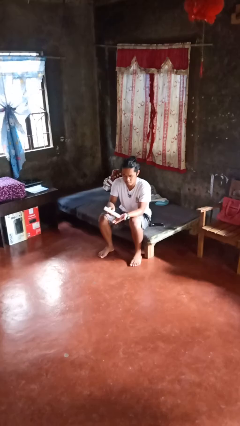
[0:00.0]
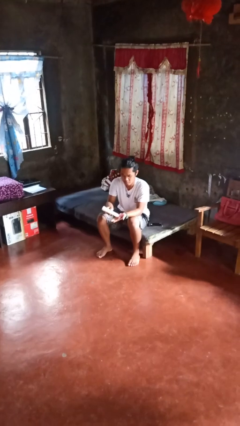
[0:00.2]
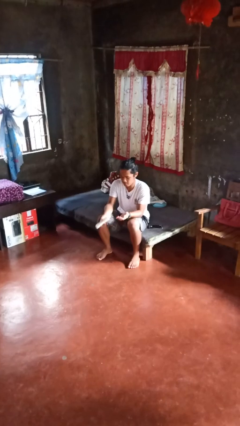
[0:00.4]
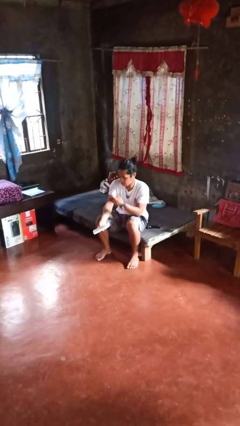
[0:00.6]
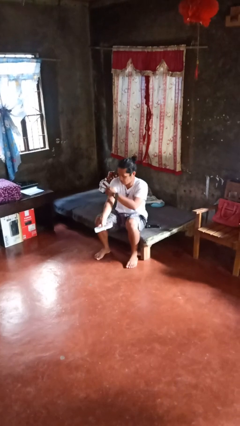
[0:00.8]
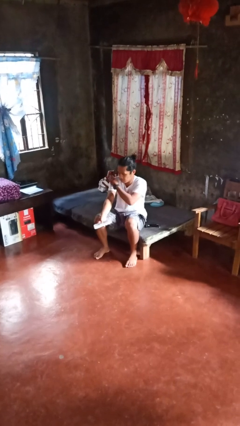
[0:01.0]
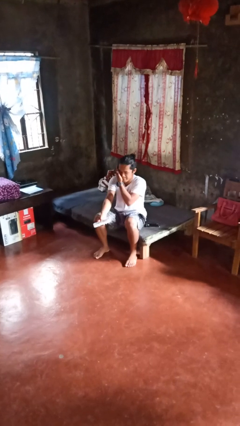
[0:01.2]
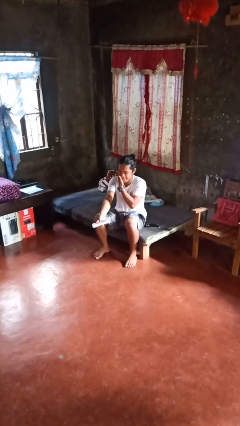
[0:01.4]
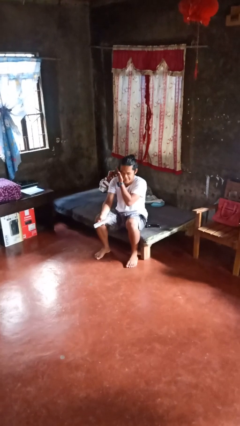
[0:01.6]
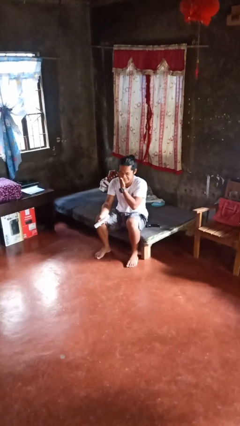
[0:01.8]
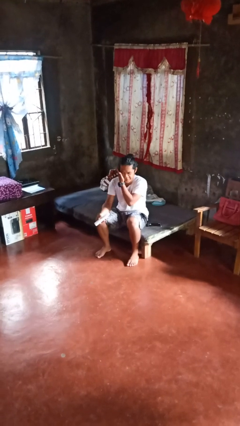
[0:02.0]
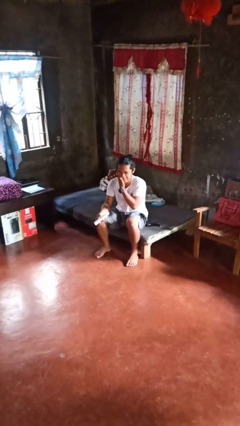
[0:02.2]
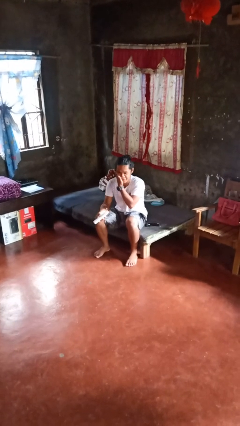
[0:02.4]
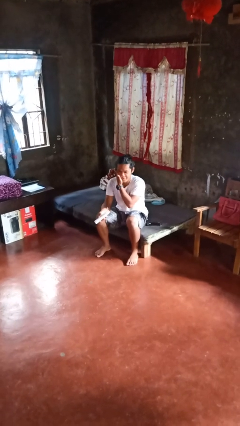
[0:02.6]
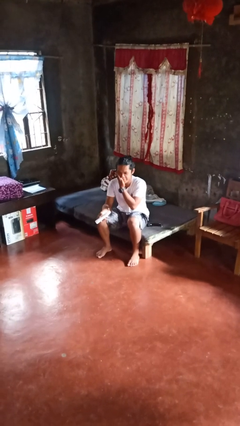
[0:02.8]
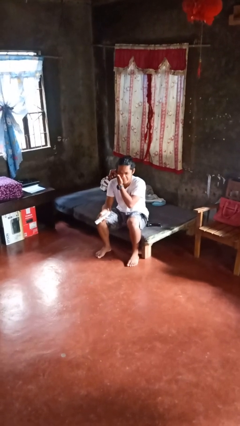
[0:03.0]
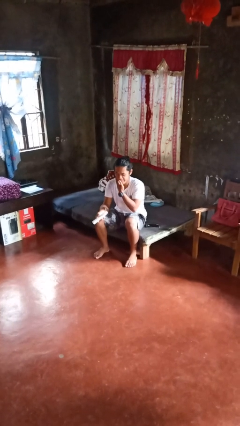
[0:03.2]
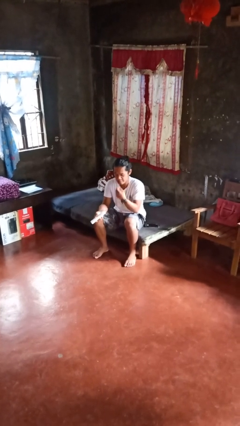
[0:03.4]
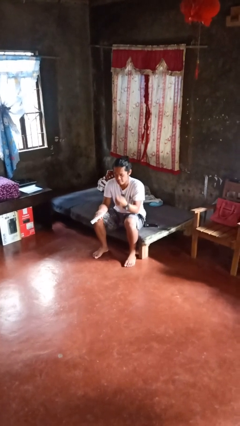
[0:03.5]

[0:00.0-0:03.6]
person applies sunscreen

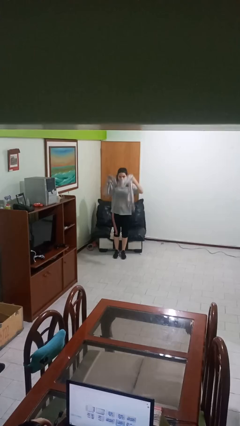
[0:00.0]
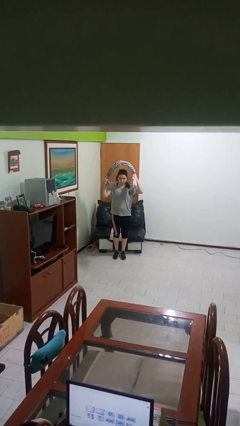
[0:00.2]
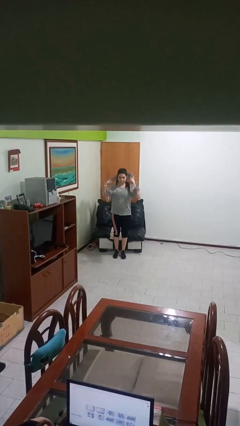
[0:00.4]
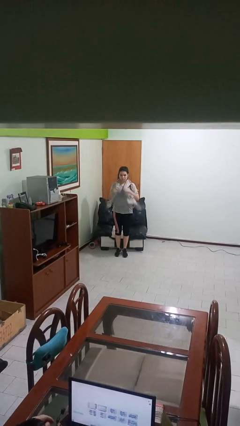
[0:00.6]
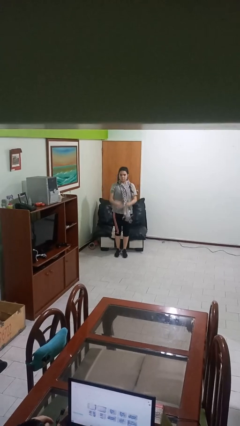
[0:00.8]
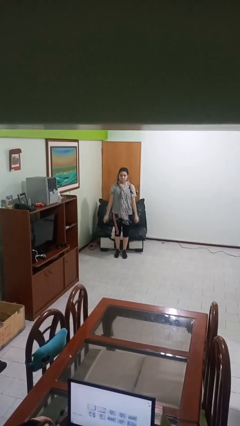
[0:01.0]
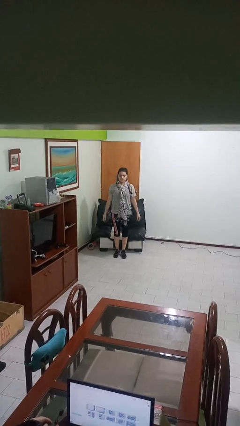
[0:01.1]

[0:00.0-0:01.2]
person puts on scarf

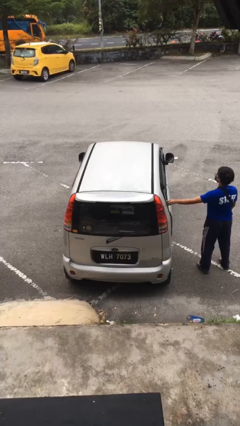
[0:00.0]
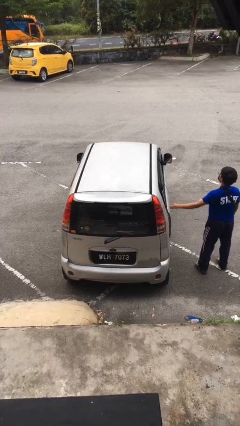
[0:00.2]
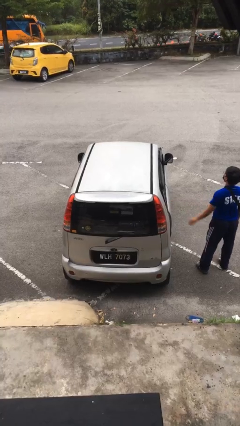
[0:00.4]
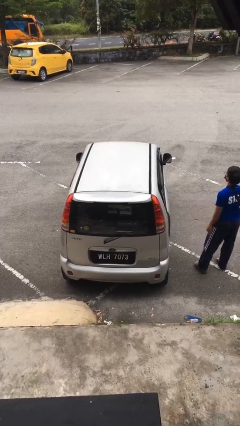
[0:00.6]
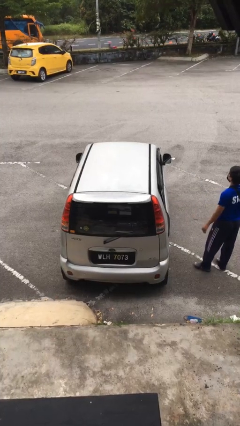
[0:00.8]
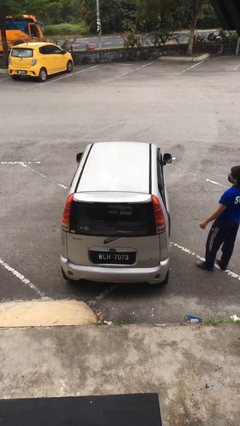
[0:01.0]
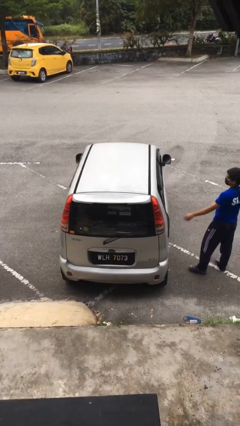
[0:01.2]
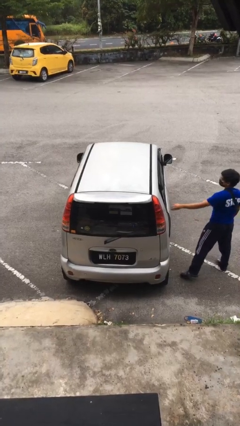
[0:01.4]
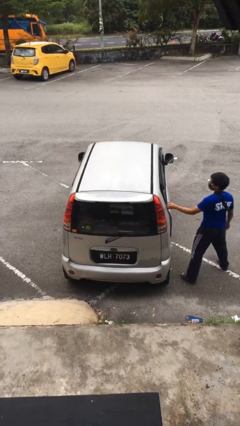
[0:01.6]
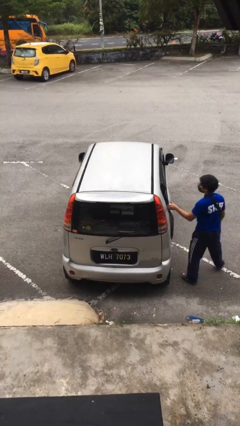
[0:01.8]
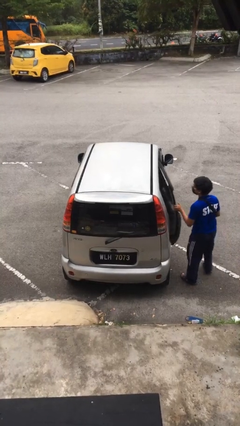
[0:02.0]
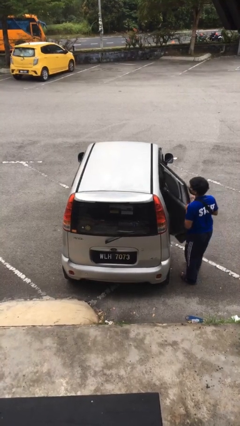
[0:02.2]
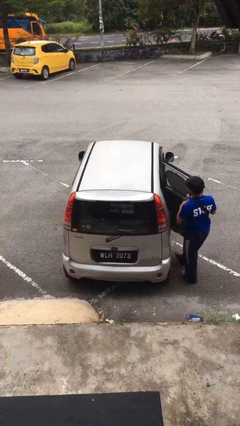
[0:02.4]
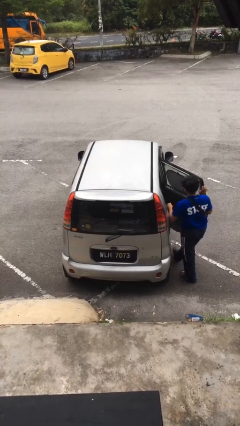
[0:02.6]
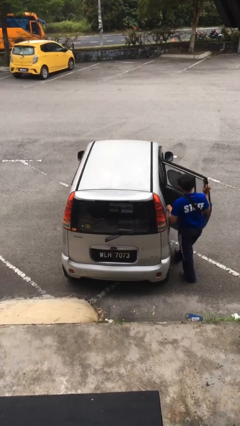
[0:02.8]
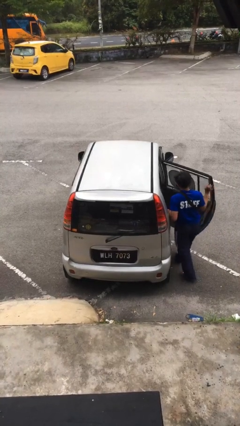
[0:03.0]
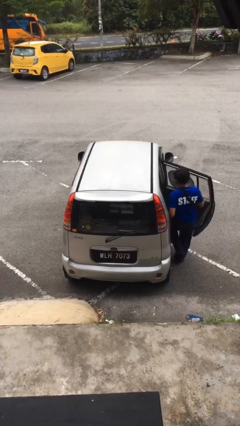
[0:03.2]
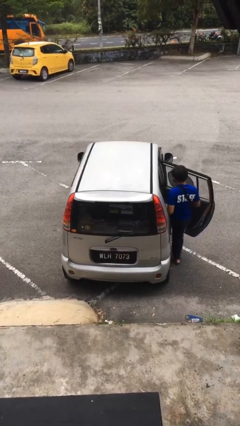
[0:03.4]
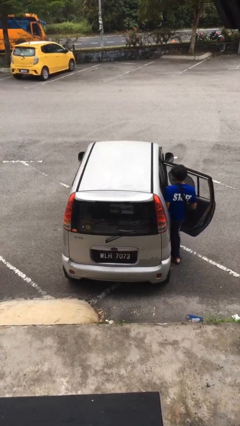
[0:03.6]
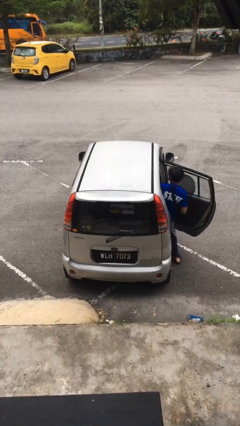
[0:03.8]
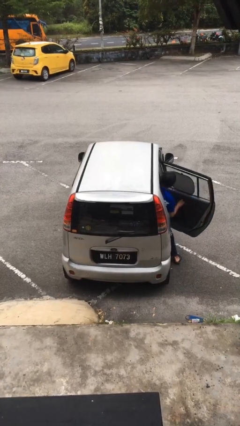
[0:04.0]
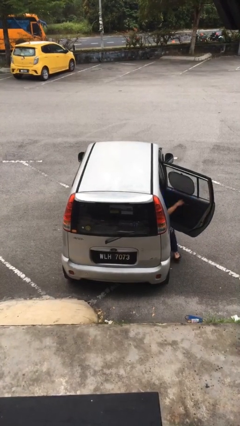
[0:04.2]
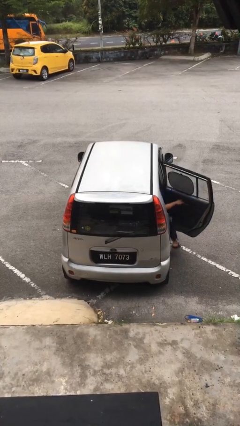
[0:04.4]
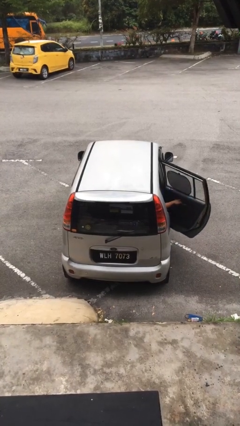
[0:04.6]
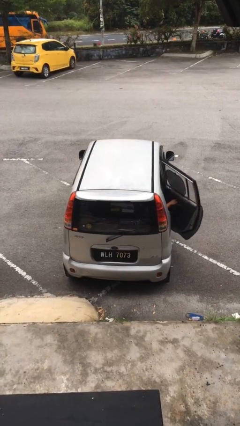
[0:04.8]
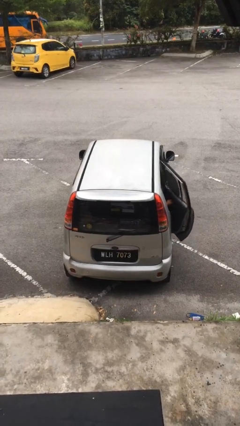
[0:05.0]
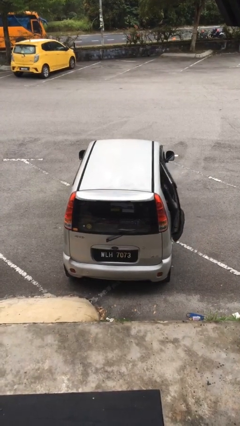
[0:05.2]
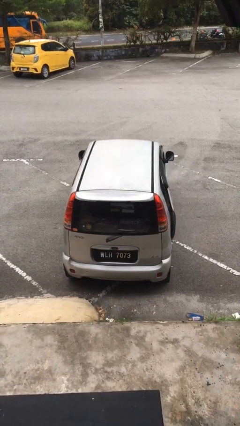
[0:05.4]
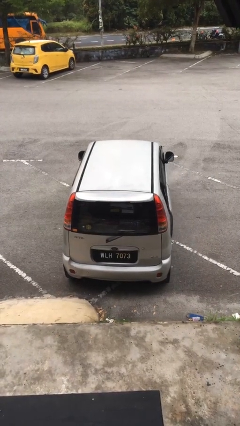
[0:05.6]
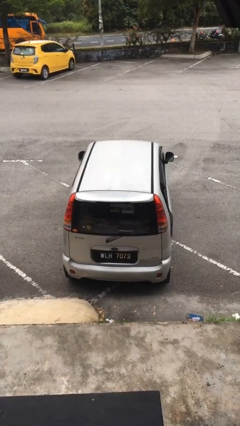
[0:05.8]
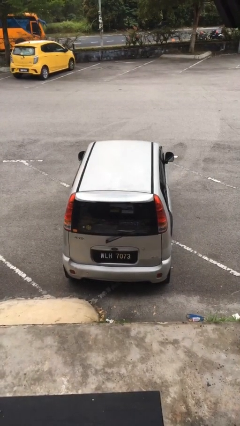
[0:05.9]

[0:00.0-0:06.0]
car picks up person

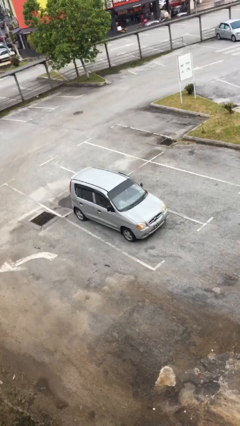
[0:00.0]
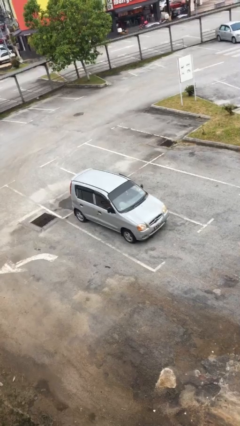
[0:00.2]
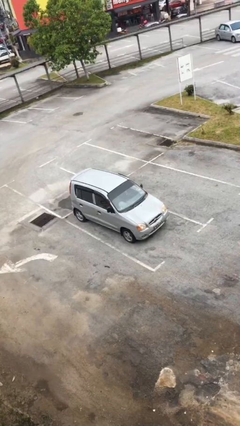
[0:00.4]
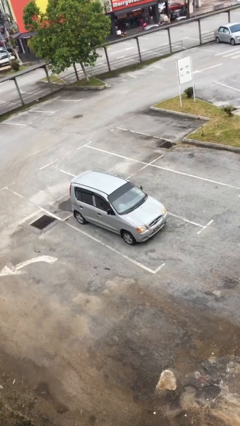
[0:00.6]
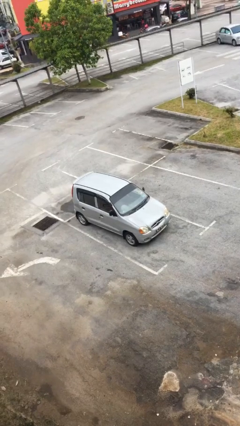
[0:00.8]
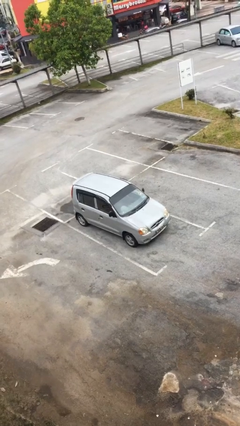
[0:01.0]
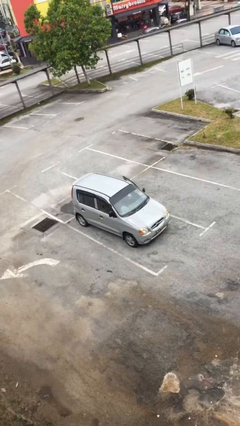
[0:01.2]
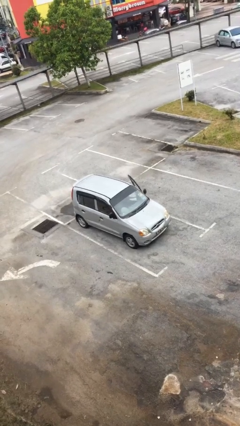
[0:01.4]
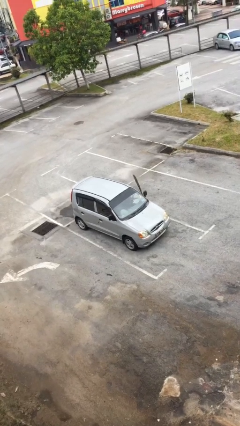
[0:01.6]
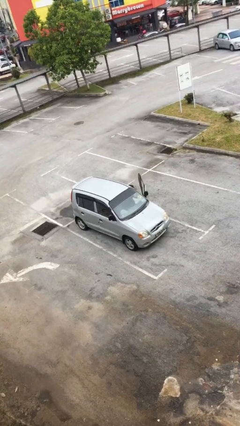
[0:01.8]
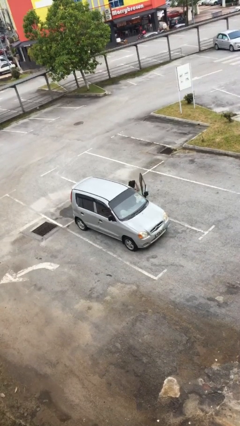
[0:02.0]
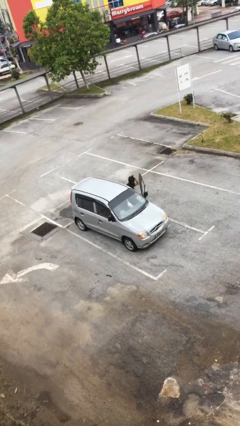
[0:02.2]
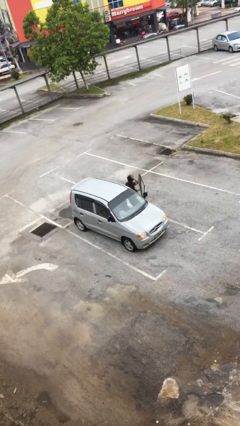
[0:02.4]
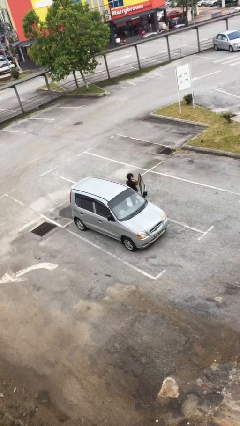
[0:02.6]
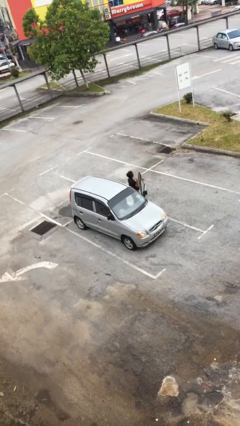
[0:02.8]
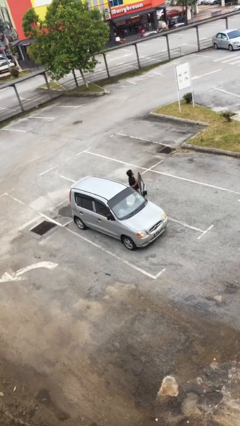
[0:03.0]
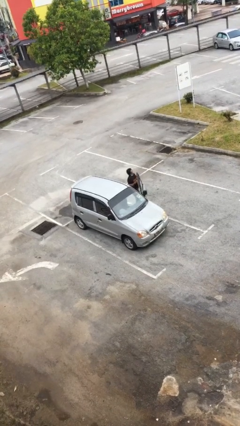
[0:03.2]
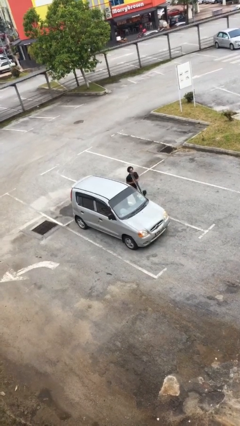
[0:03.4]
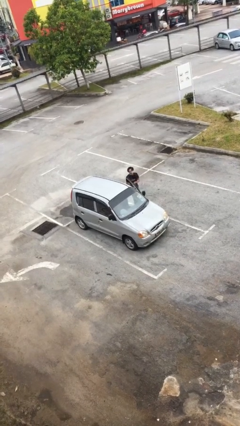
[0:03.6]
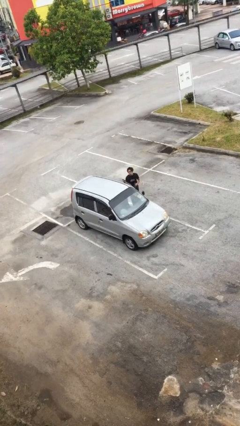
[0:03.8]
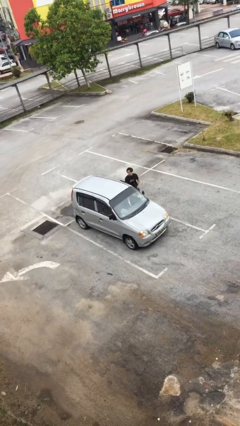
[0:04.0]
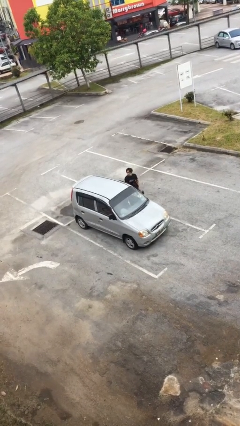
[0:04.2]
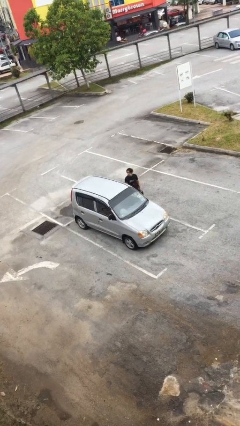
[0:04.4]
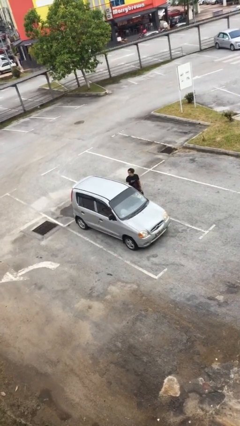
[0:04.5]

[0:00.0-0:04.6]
car drops off person

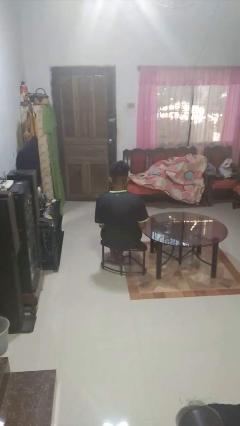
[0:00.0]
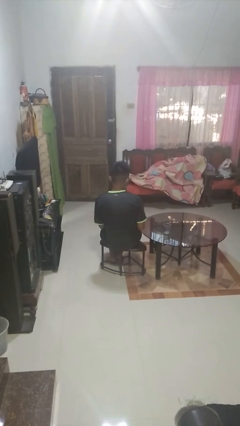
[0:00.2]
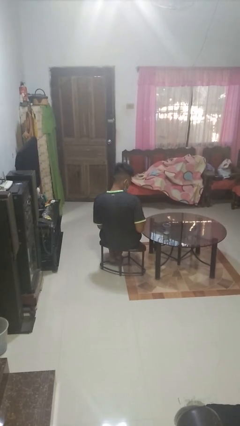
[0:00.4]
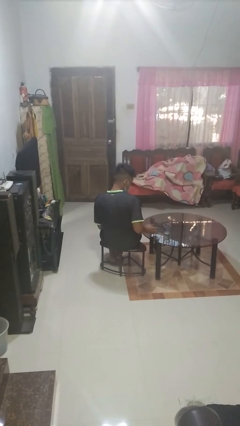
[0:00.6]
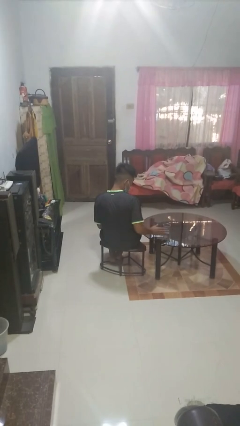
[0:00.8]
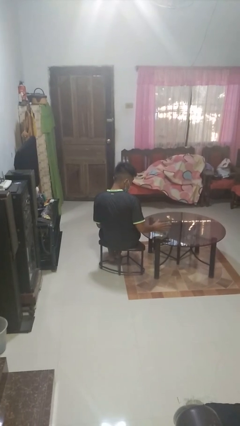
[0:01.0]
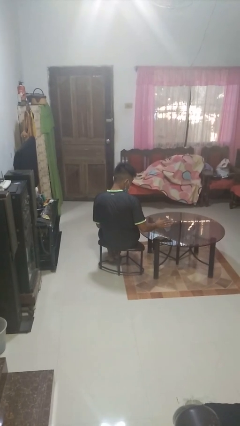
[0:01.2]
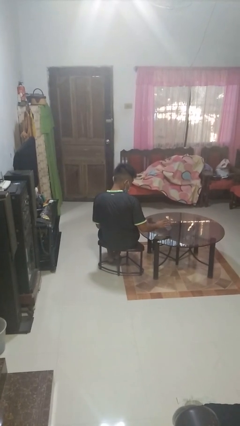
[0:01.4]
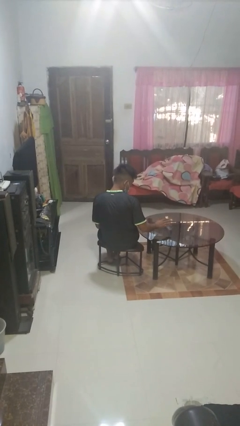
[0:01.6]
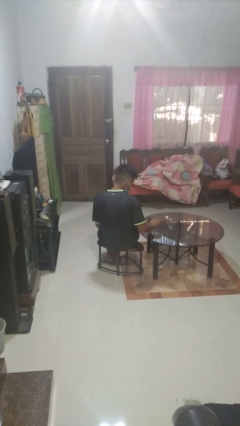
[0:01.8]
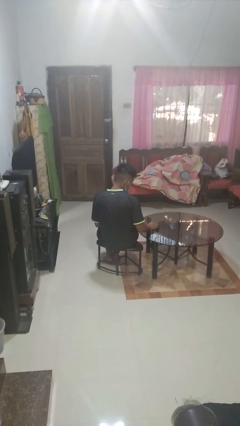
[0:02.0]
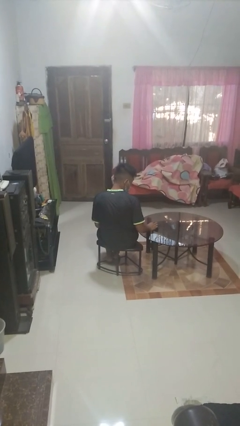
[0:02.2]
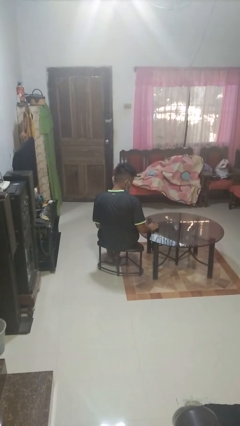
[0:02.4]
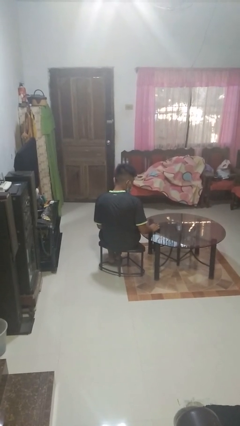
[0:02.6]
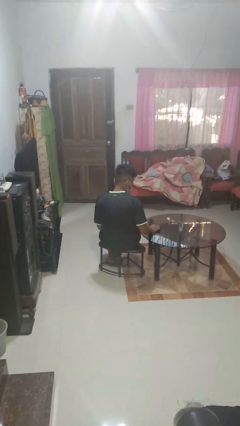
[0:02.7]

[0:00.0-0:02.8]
person knocks over glass
